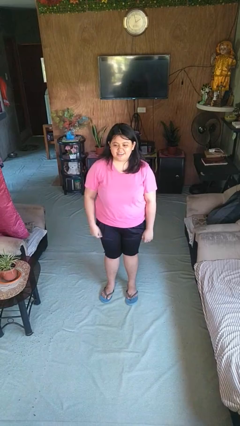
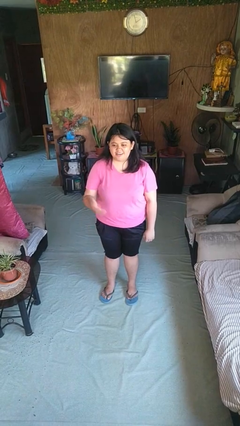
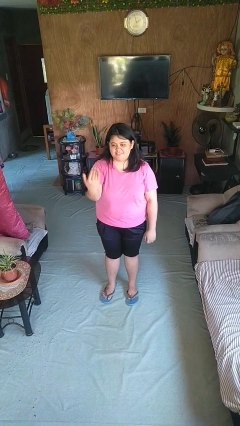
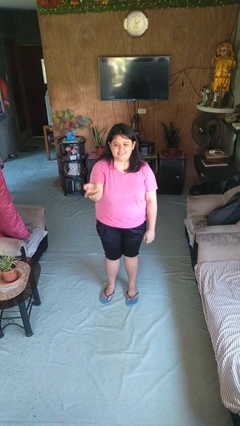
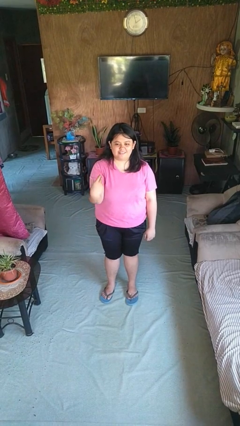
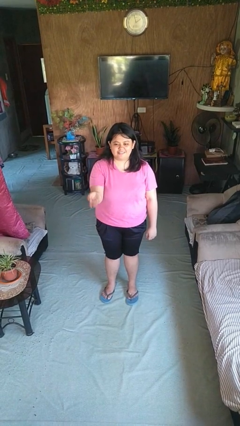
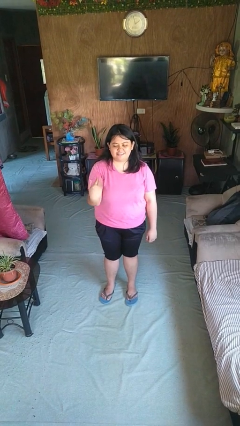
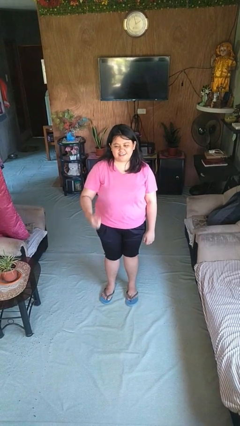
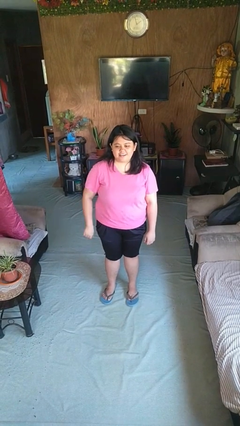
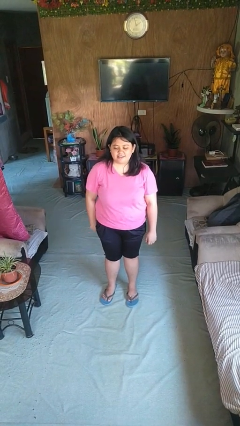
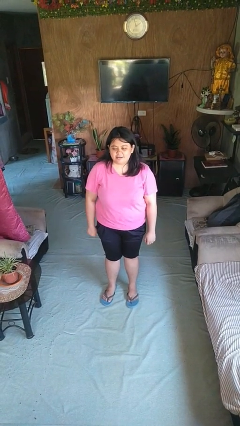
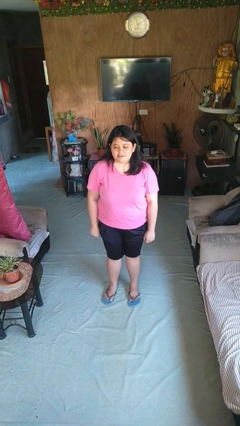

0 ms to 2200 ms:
person gestures come here

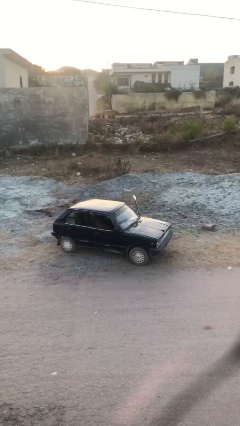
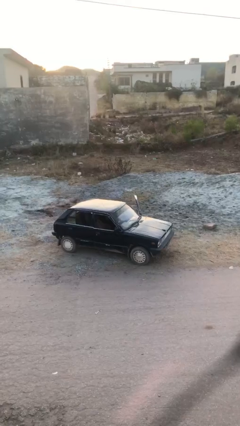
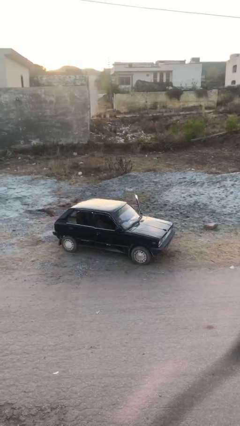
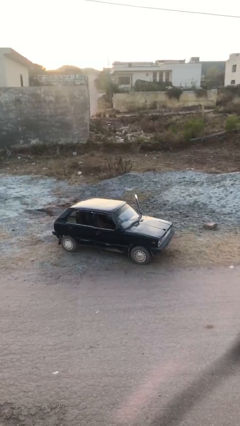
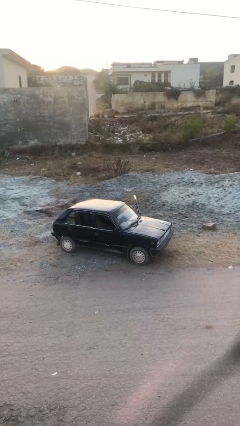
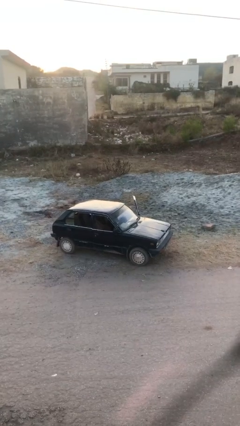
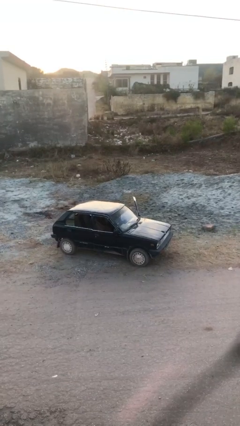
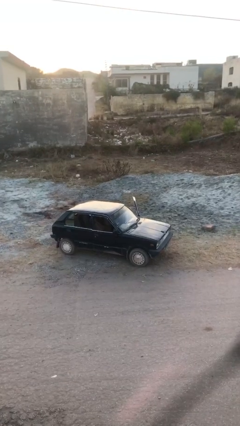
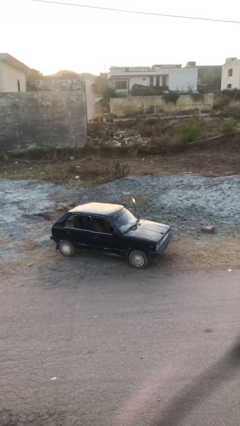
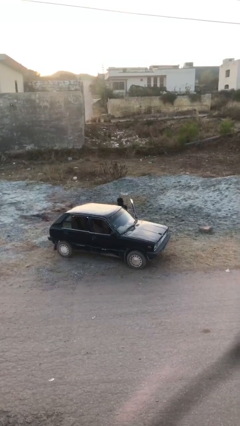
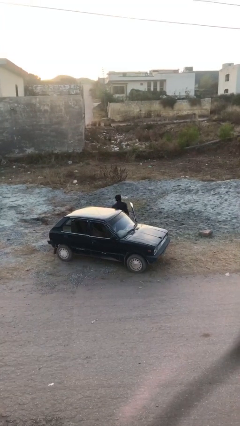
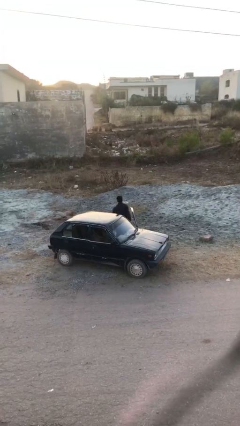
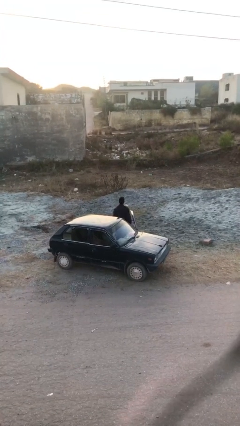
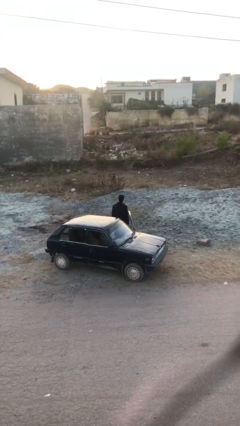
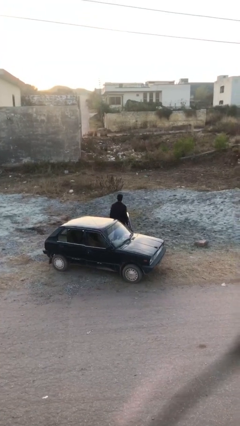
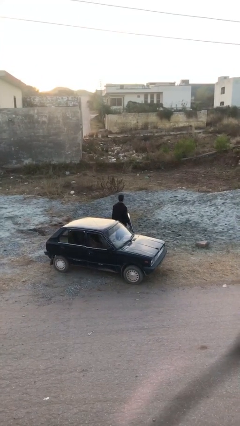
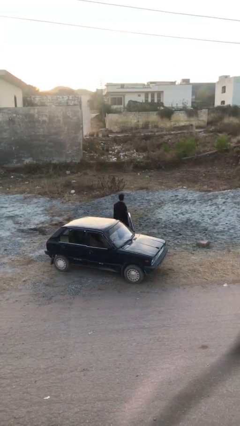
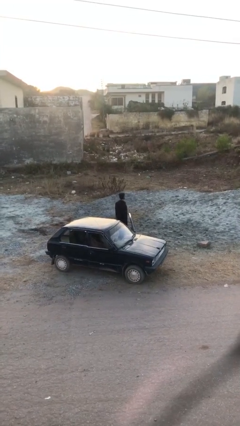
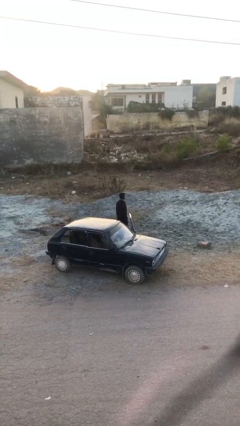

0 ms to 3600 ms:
person exits car

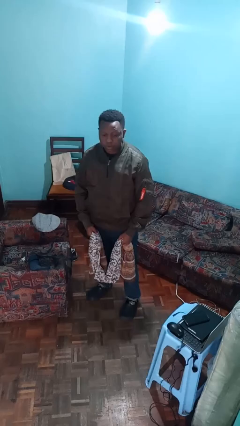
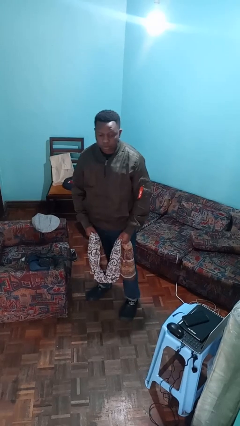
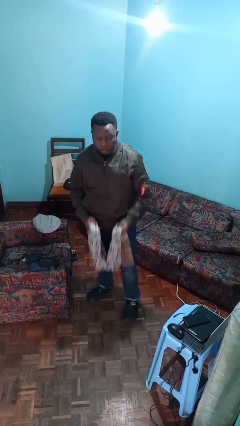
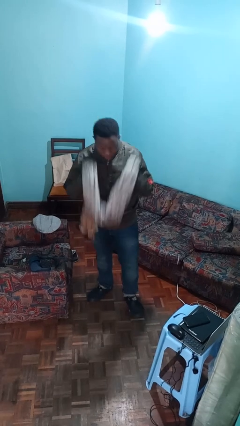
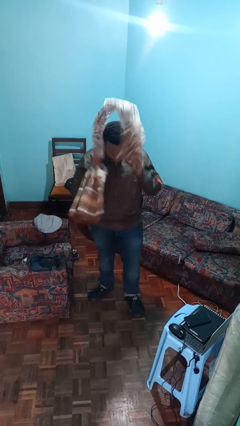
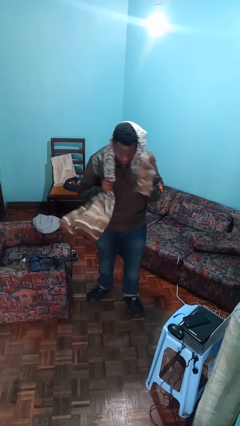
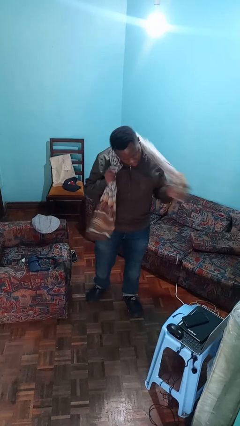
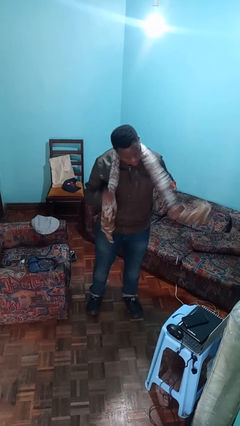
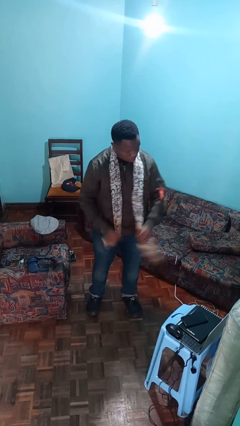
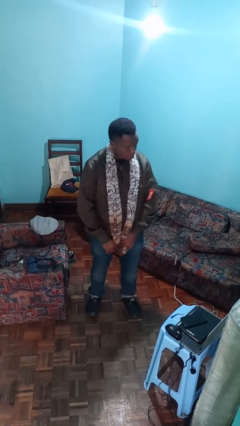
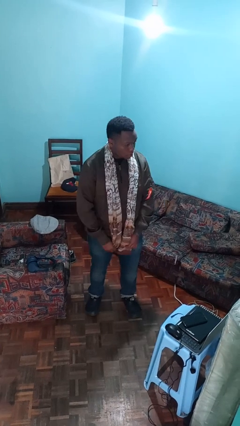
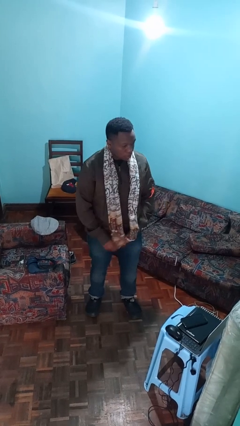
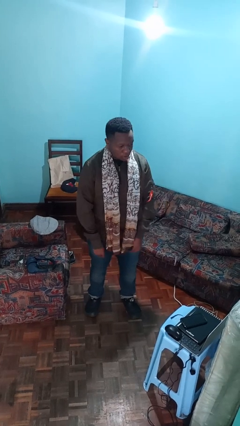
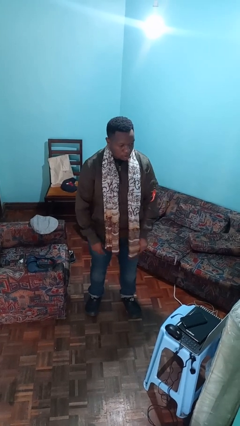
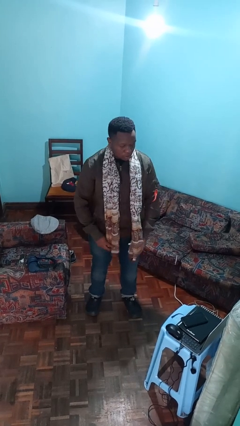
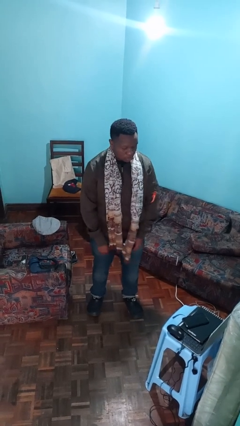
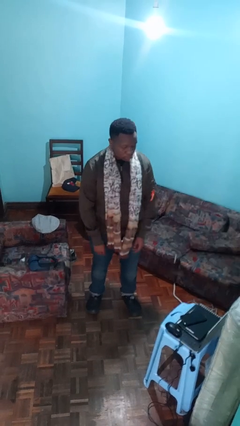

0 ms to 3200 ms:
person puts on scarf

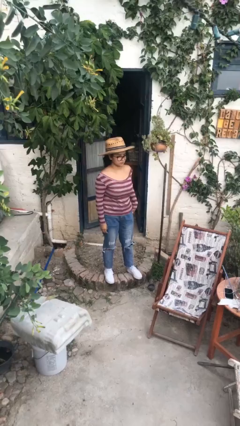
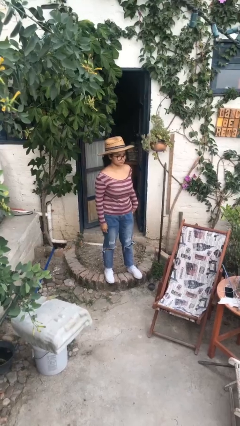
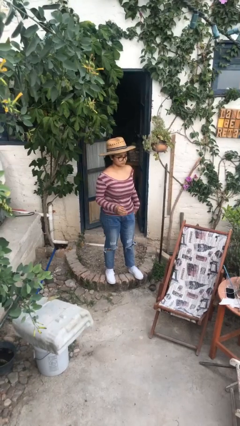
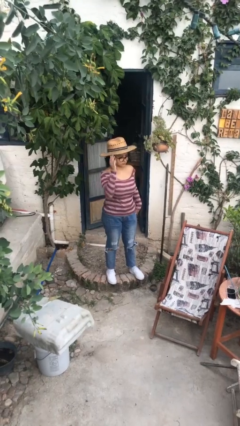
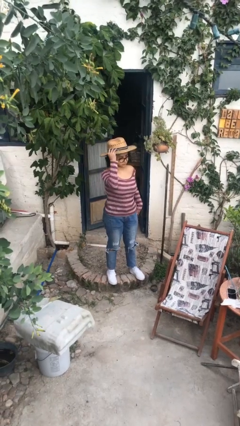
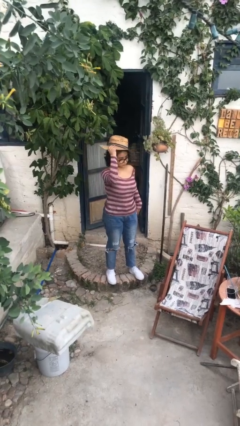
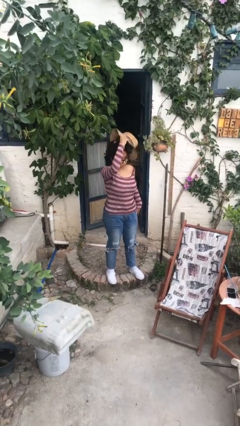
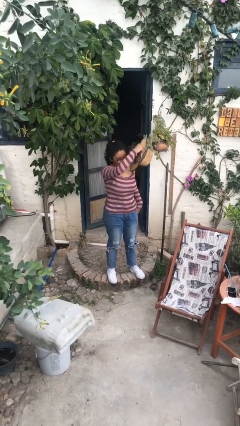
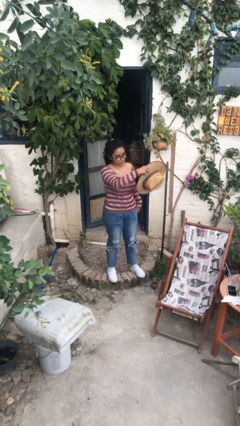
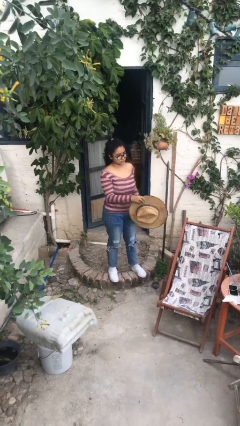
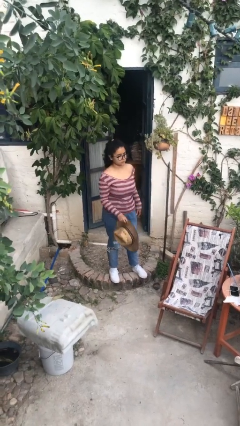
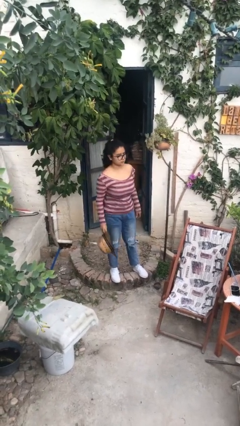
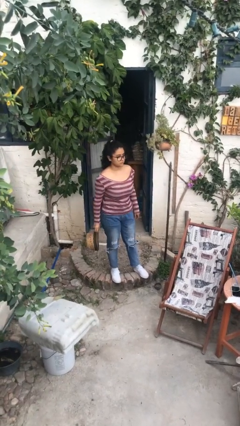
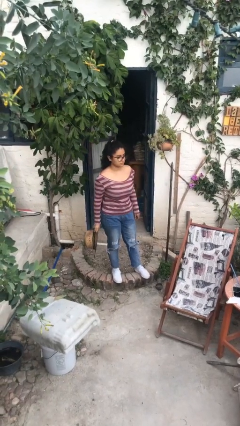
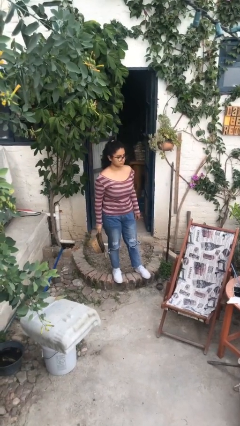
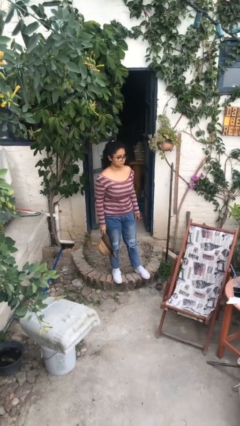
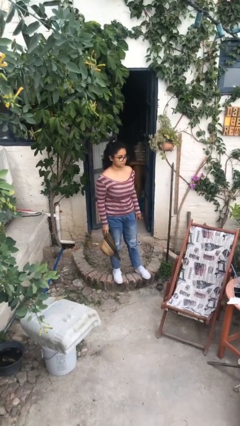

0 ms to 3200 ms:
person takes off hat

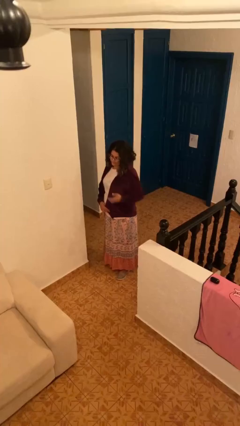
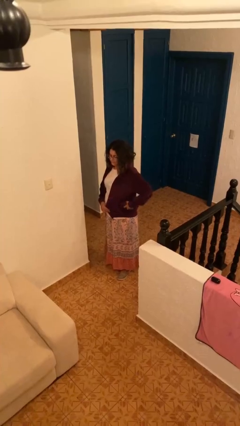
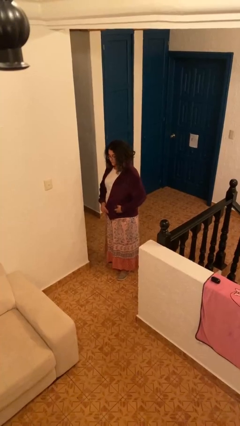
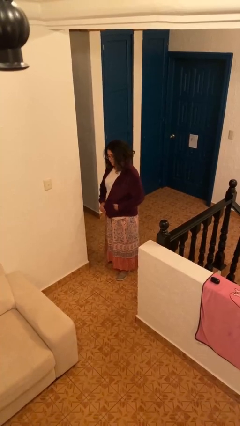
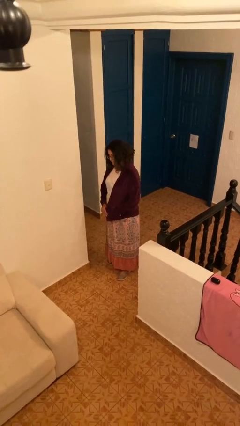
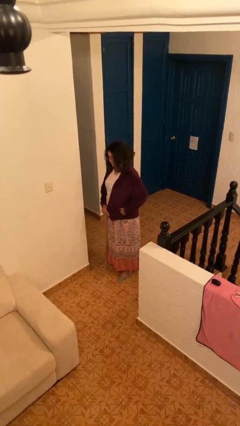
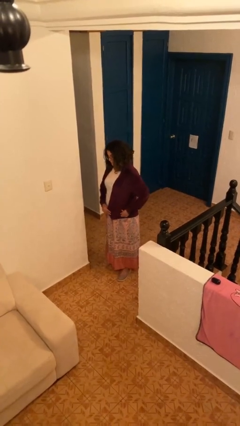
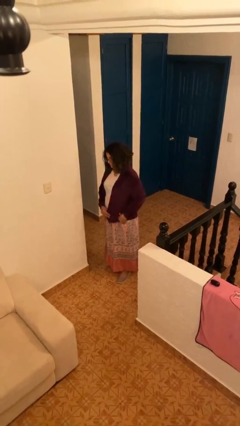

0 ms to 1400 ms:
person puts phone into pocket

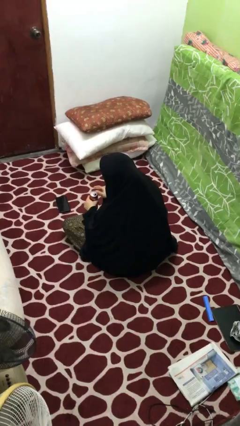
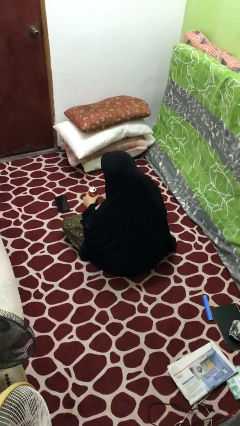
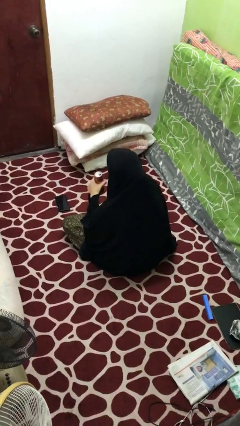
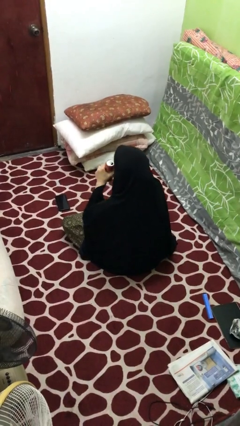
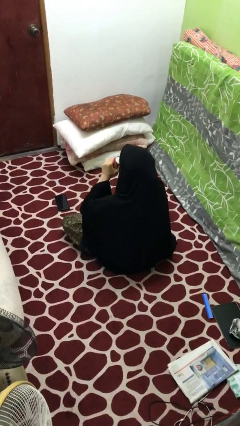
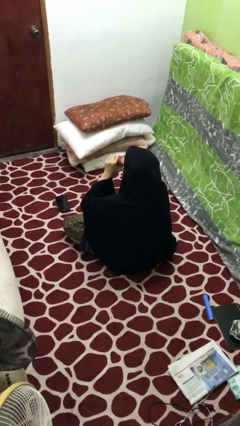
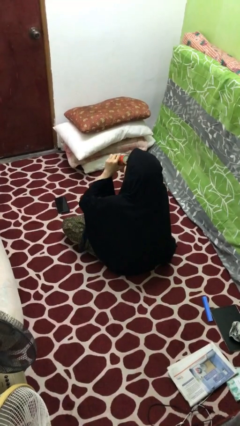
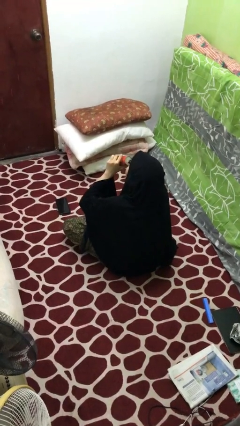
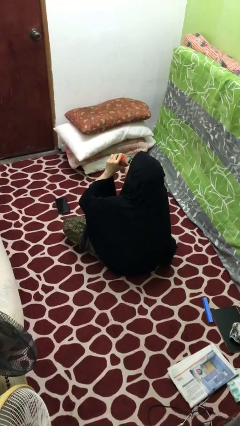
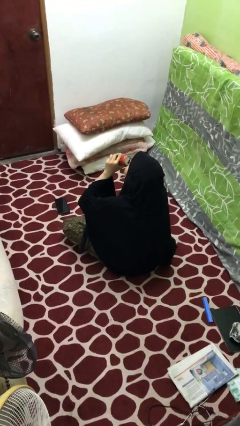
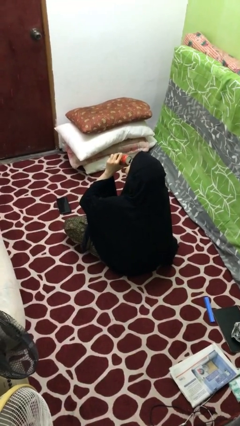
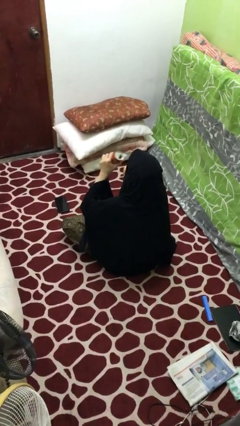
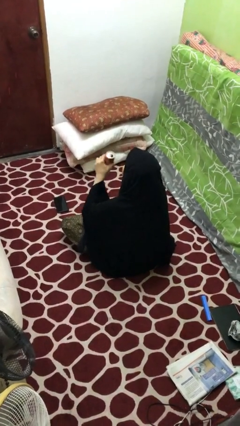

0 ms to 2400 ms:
person drinks from beverage can

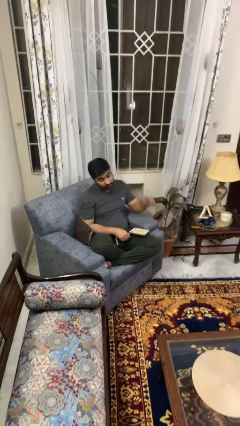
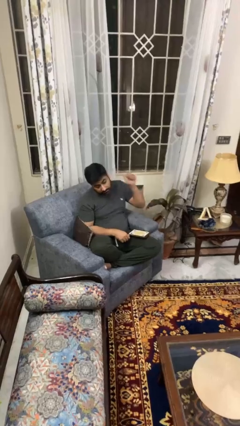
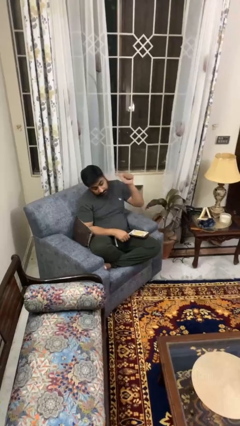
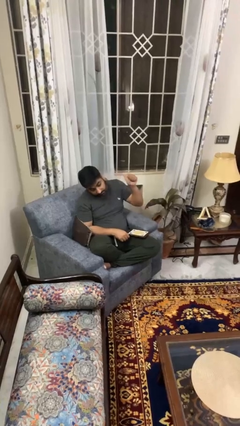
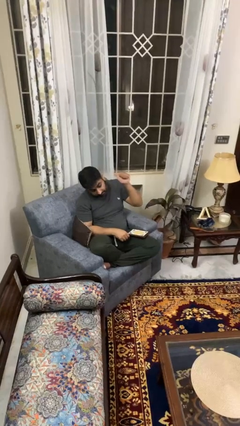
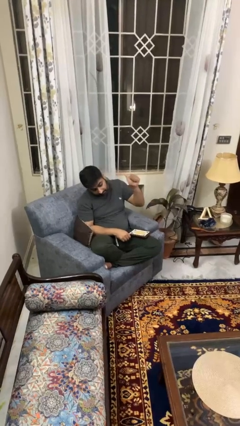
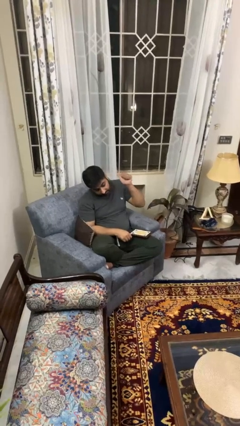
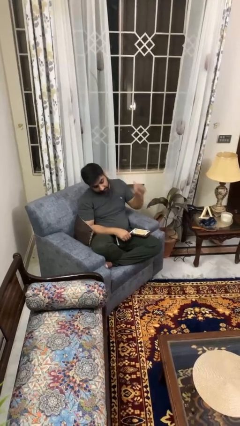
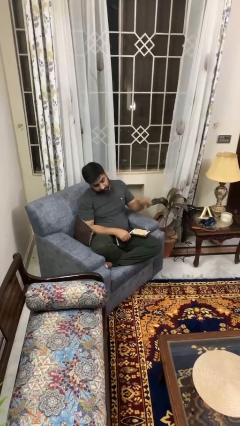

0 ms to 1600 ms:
person gestures behind me
